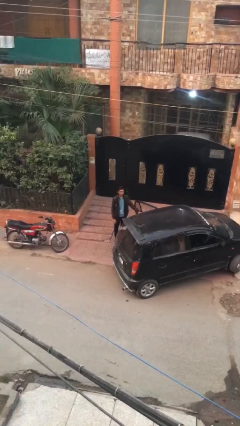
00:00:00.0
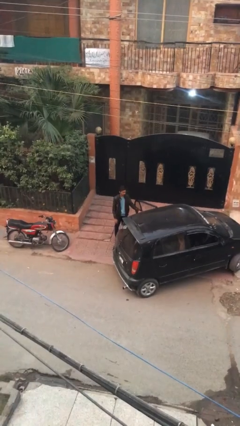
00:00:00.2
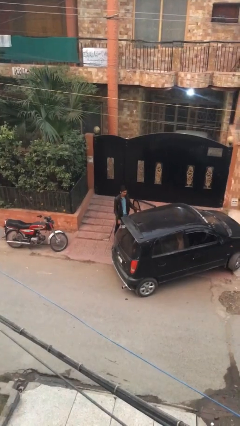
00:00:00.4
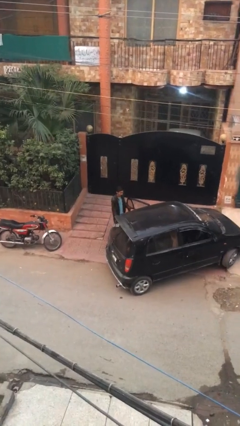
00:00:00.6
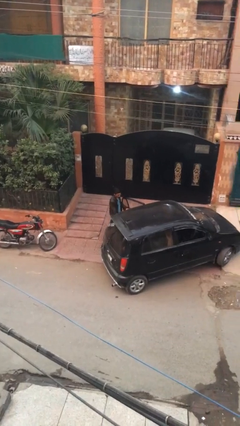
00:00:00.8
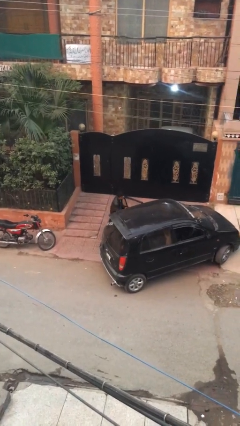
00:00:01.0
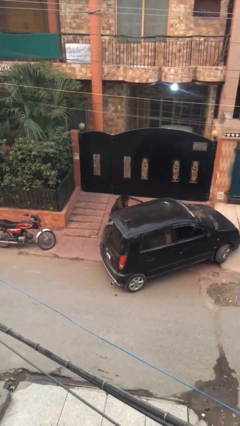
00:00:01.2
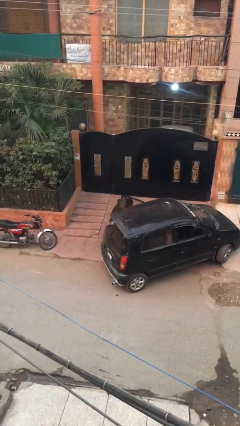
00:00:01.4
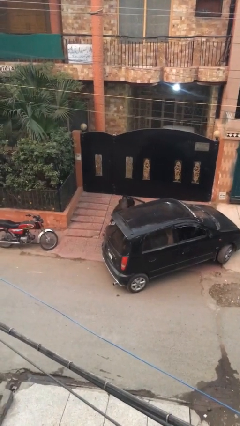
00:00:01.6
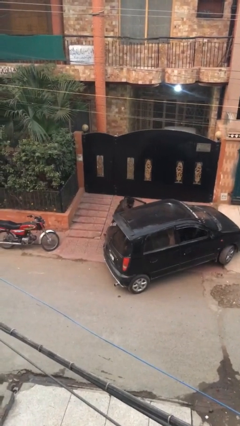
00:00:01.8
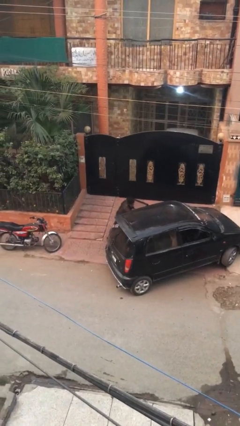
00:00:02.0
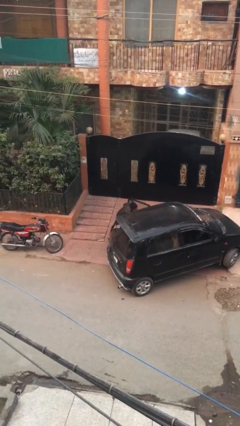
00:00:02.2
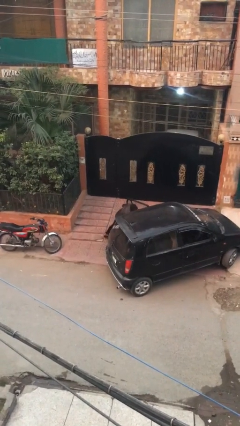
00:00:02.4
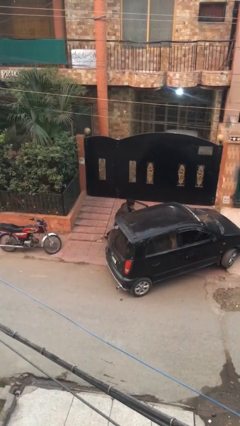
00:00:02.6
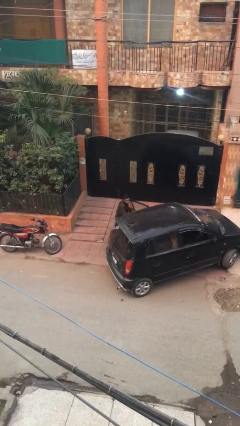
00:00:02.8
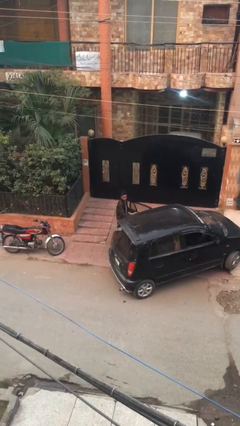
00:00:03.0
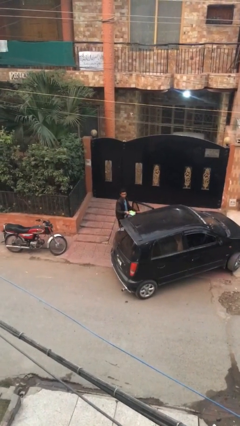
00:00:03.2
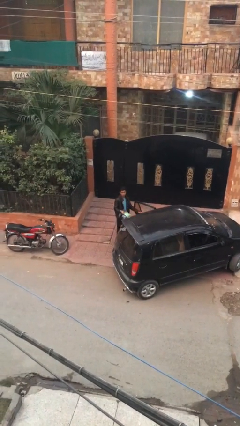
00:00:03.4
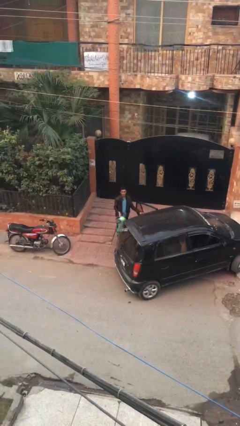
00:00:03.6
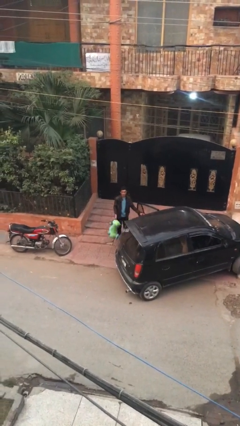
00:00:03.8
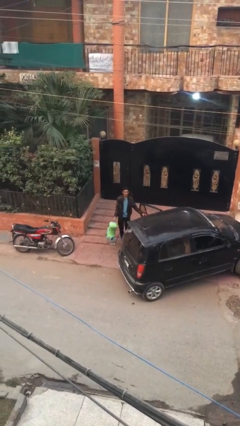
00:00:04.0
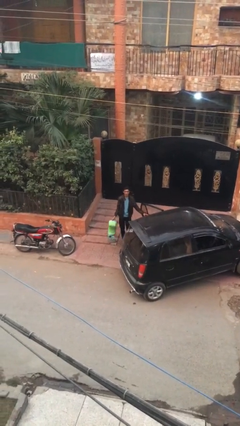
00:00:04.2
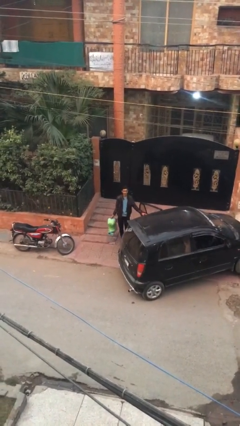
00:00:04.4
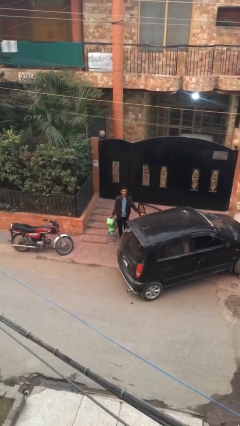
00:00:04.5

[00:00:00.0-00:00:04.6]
person unloads car

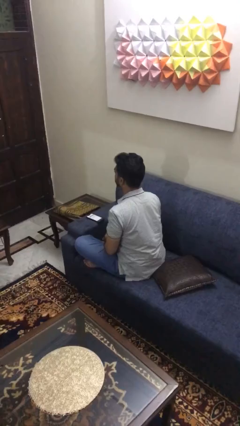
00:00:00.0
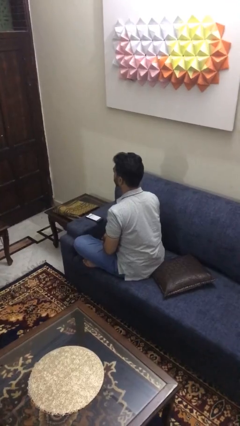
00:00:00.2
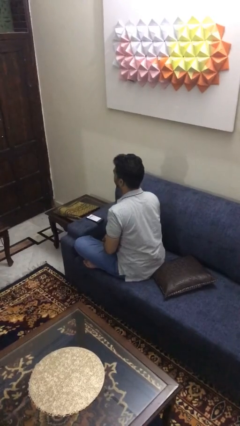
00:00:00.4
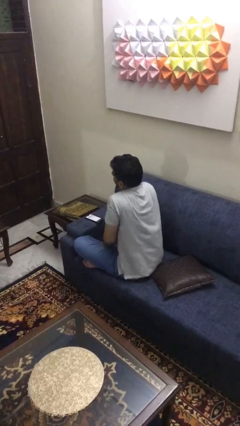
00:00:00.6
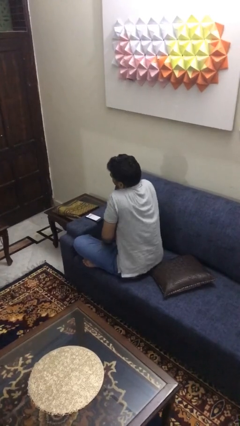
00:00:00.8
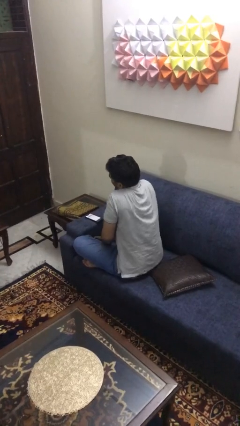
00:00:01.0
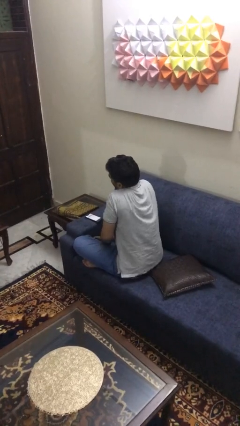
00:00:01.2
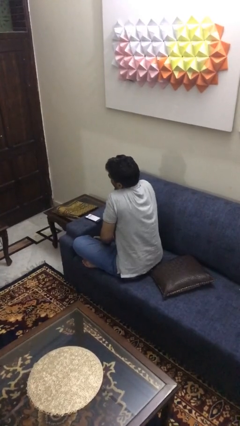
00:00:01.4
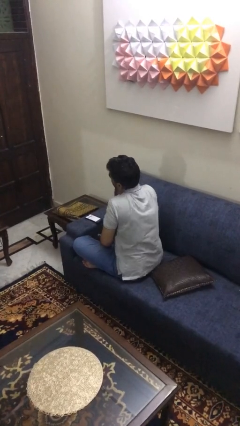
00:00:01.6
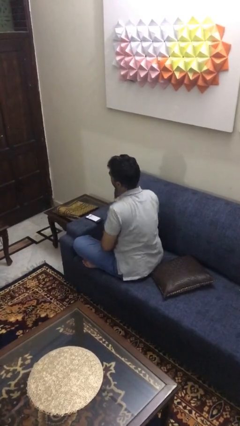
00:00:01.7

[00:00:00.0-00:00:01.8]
person shrugs

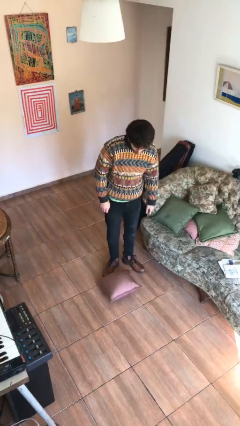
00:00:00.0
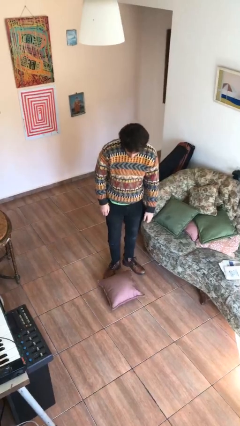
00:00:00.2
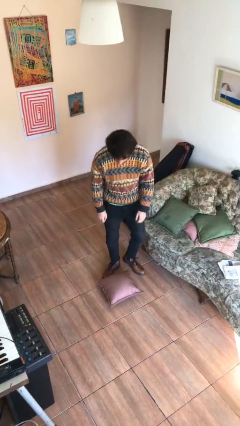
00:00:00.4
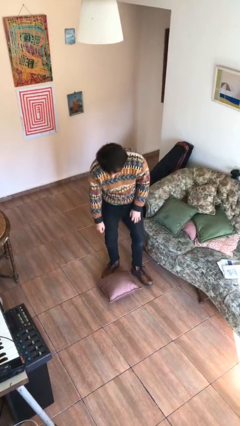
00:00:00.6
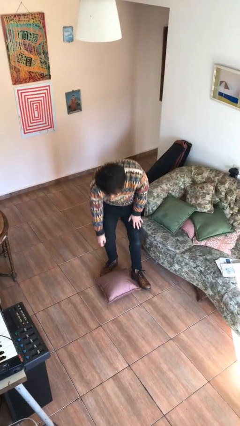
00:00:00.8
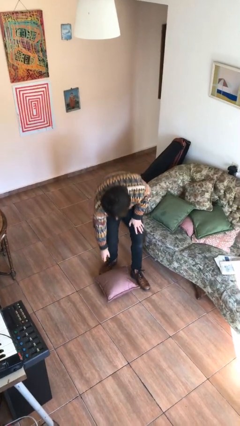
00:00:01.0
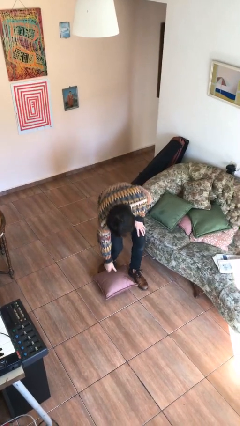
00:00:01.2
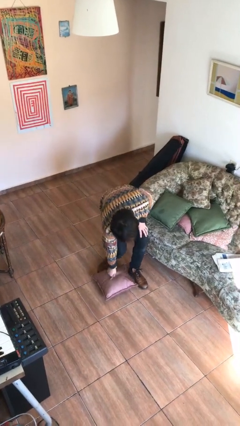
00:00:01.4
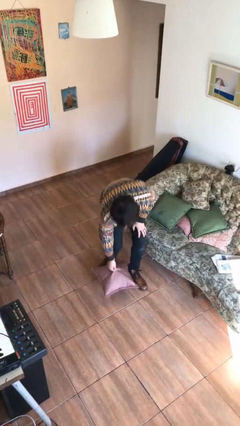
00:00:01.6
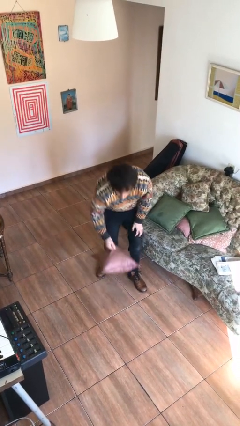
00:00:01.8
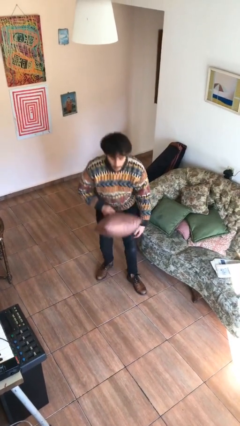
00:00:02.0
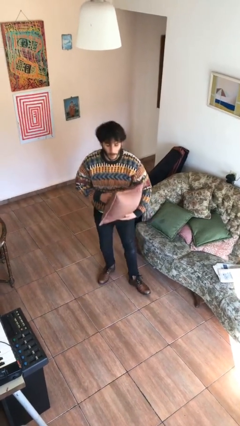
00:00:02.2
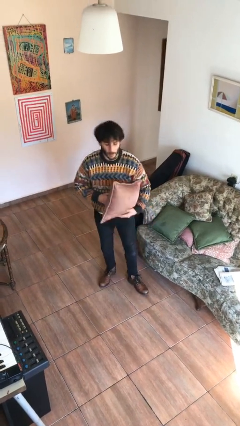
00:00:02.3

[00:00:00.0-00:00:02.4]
person picks up object from floor

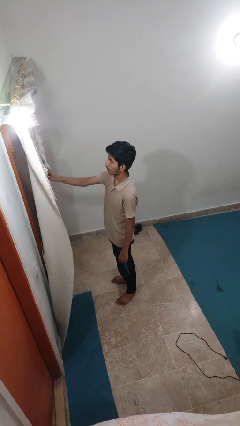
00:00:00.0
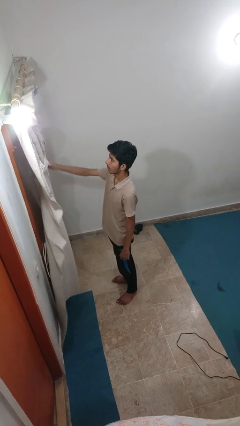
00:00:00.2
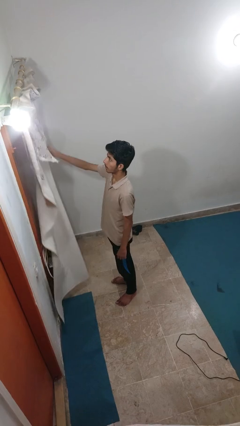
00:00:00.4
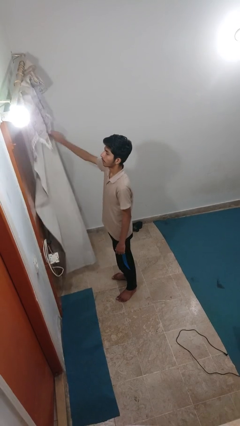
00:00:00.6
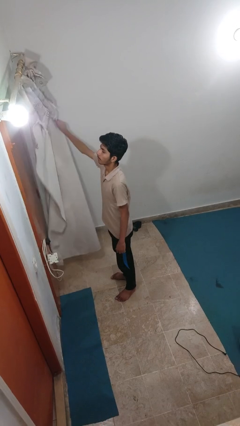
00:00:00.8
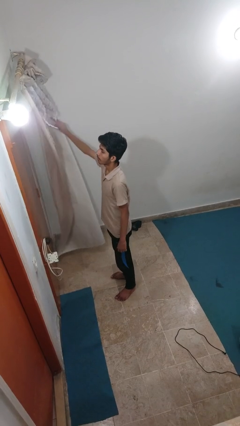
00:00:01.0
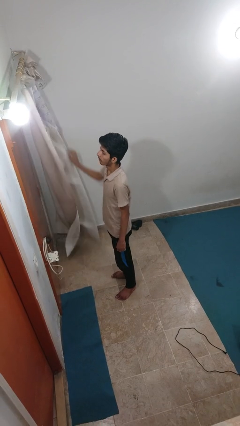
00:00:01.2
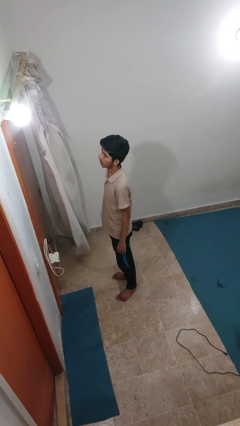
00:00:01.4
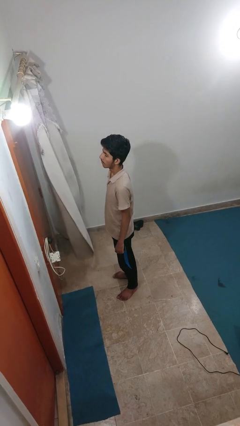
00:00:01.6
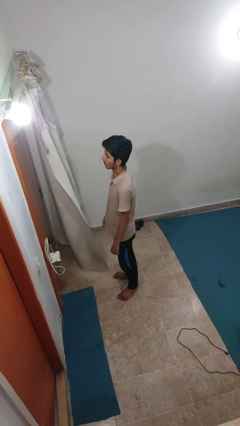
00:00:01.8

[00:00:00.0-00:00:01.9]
person opens curtains

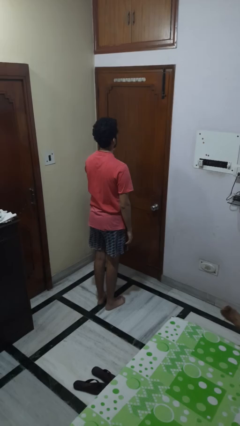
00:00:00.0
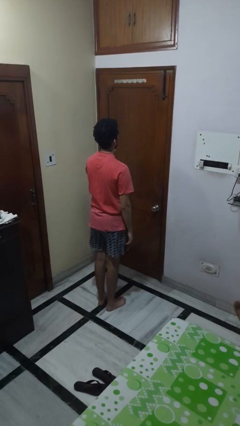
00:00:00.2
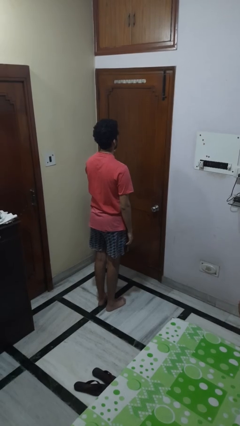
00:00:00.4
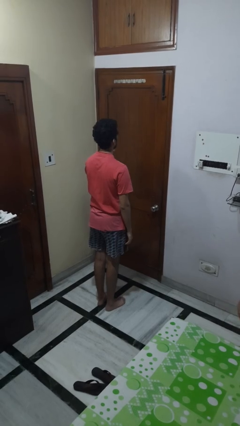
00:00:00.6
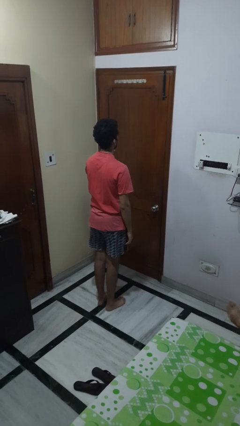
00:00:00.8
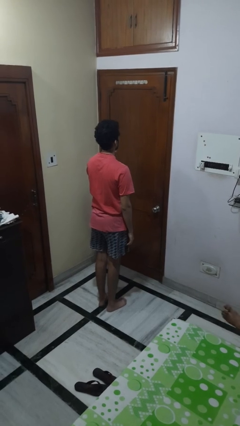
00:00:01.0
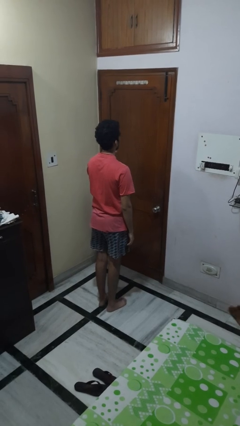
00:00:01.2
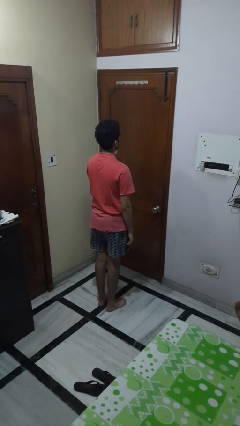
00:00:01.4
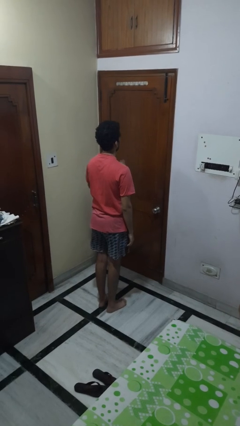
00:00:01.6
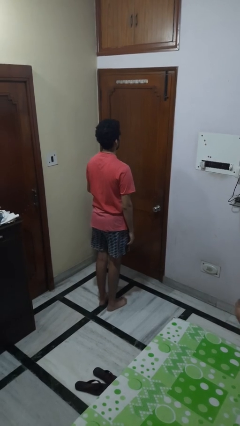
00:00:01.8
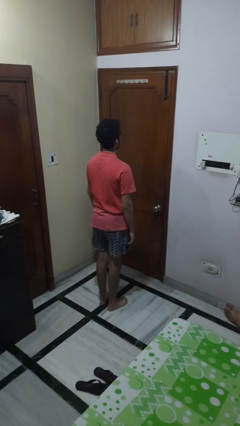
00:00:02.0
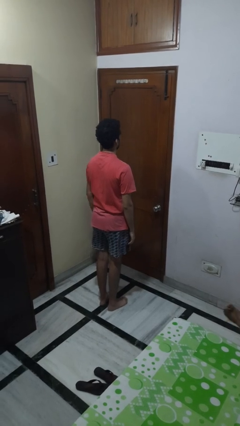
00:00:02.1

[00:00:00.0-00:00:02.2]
person gestures stop

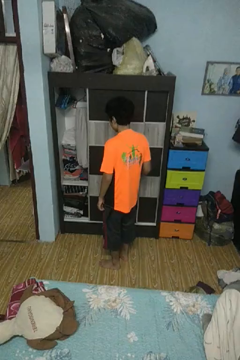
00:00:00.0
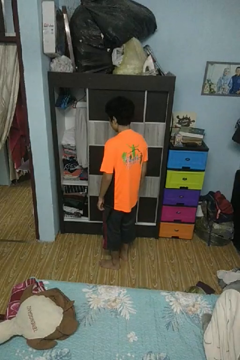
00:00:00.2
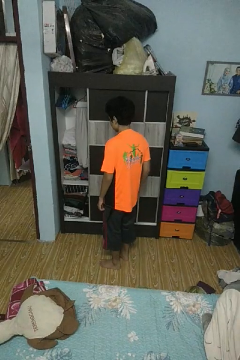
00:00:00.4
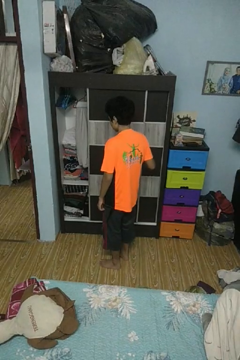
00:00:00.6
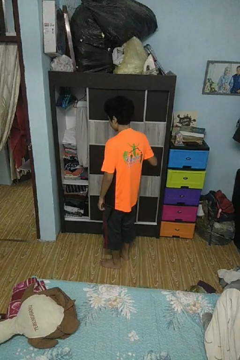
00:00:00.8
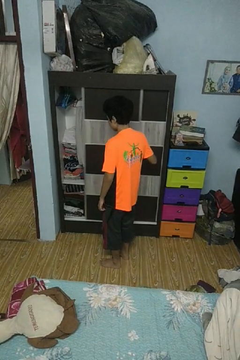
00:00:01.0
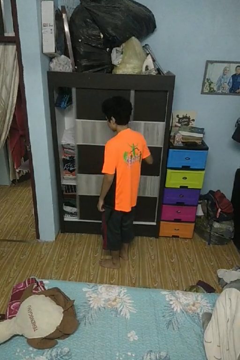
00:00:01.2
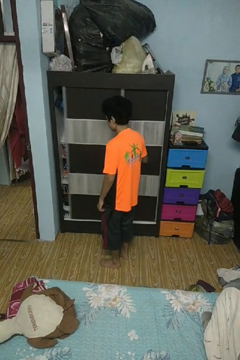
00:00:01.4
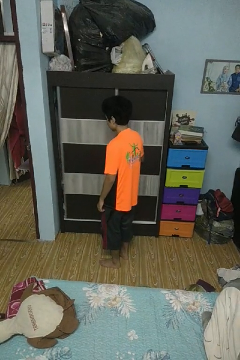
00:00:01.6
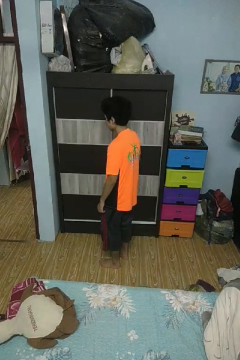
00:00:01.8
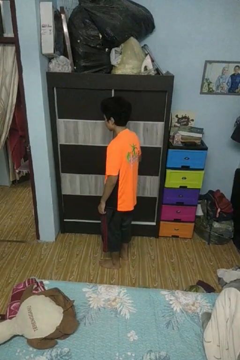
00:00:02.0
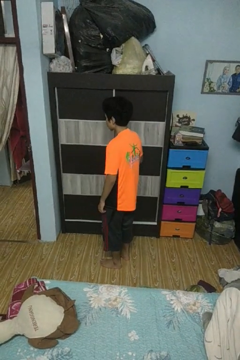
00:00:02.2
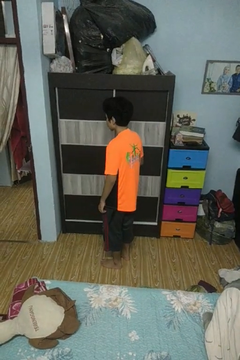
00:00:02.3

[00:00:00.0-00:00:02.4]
person closes closet door

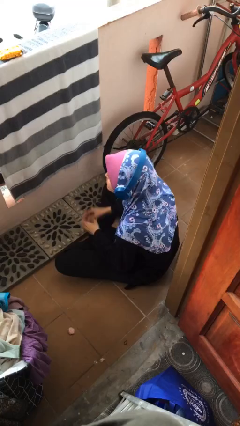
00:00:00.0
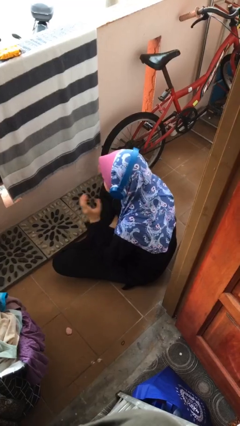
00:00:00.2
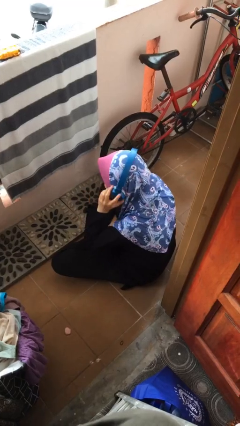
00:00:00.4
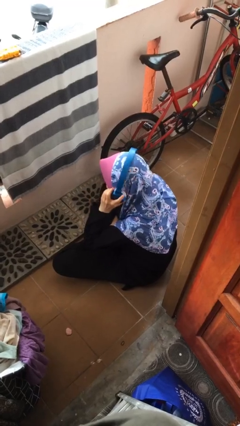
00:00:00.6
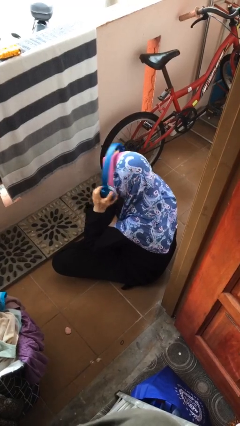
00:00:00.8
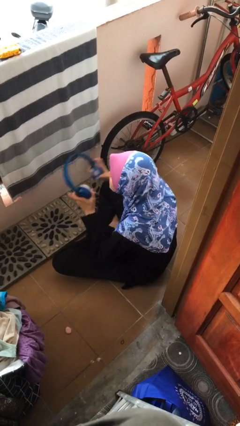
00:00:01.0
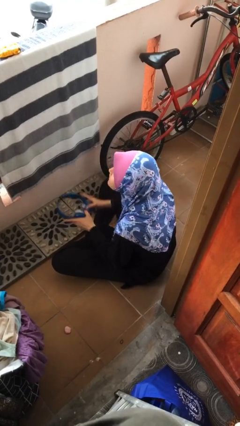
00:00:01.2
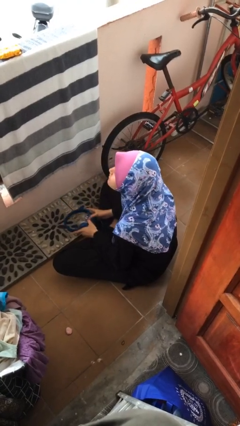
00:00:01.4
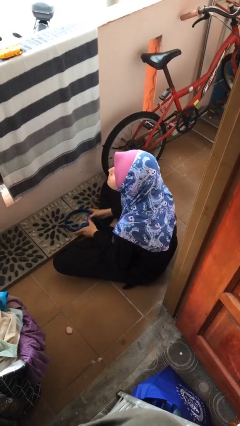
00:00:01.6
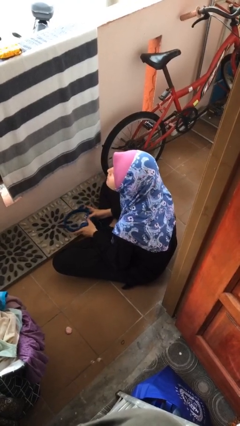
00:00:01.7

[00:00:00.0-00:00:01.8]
person takes off headphones

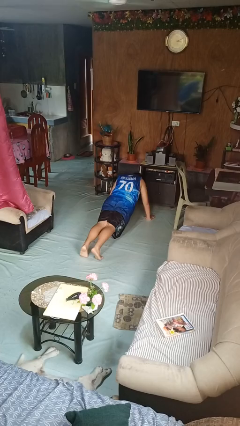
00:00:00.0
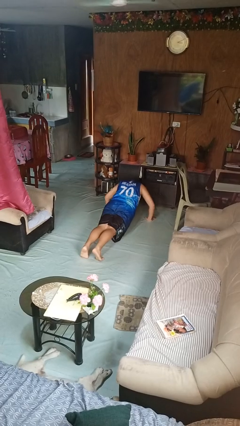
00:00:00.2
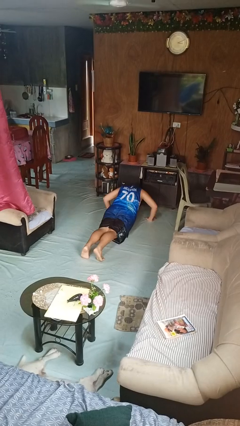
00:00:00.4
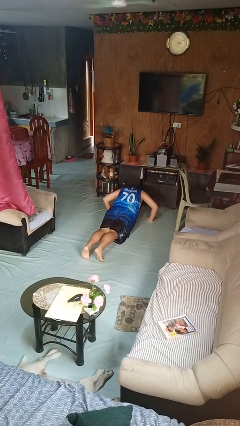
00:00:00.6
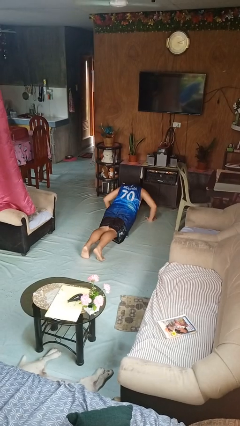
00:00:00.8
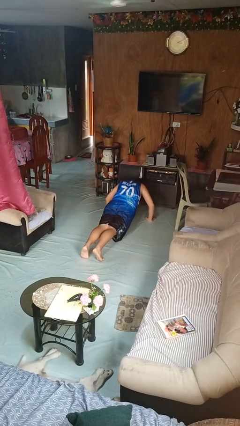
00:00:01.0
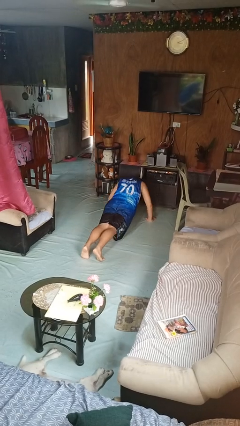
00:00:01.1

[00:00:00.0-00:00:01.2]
person exercises with pushup
